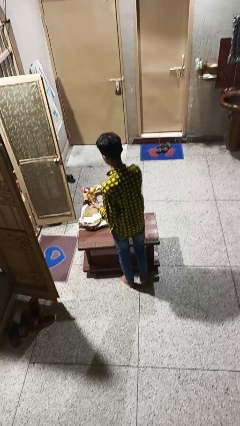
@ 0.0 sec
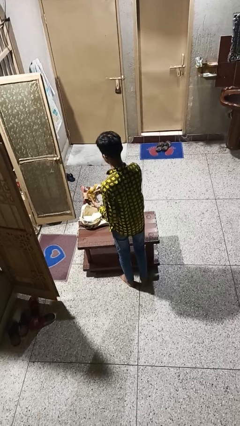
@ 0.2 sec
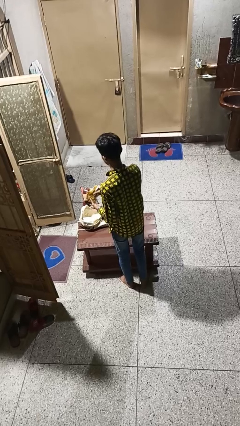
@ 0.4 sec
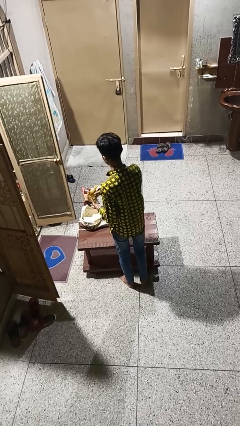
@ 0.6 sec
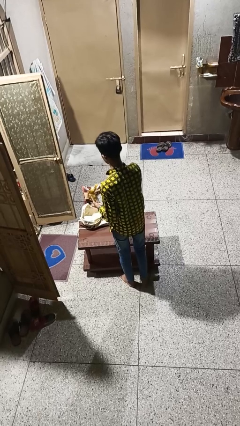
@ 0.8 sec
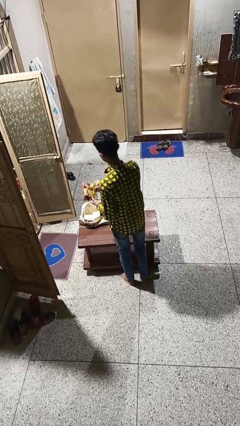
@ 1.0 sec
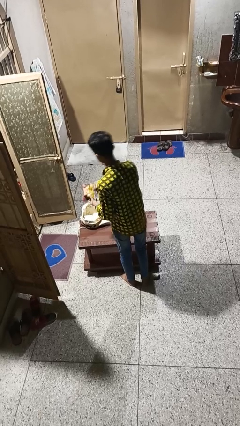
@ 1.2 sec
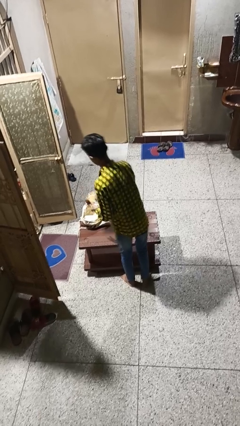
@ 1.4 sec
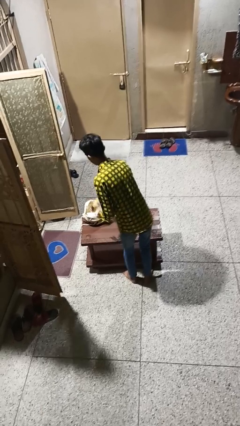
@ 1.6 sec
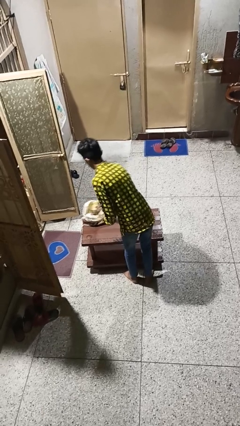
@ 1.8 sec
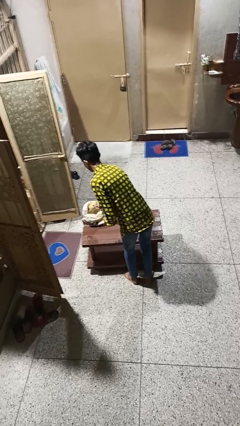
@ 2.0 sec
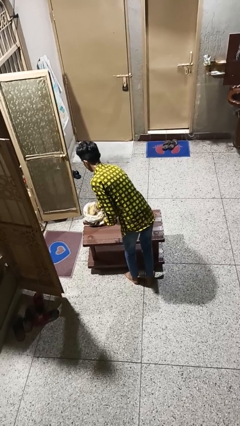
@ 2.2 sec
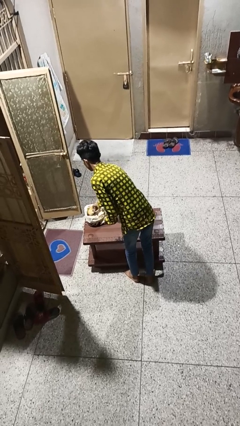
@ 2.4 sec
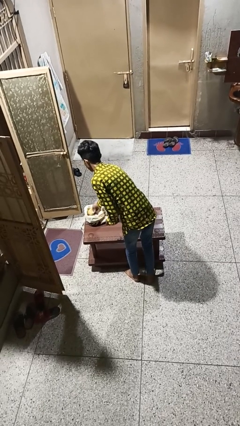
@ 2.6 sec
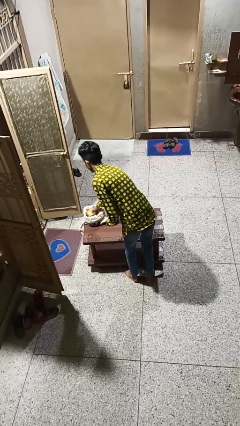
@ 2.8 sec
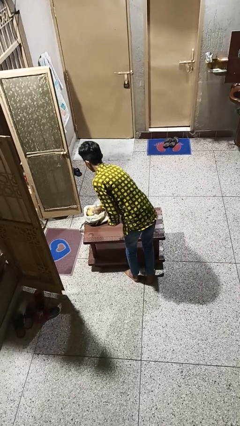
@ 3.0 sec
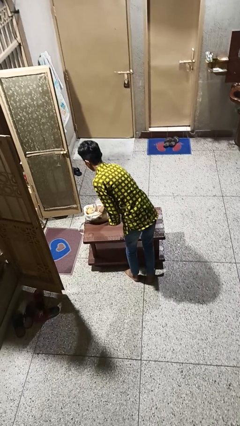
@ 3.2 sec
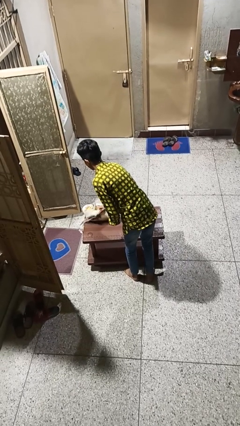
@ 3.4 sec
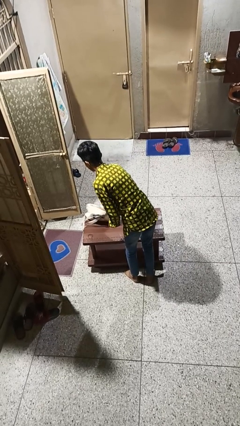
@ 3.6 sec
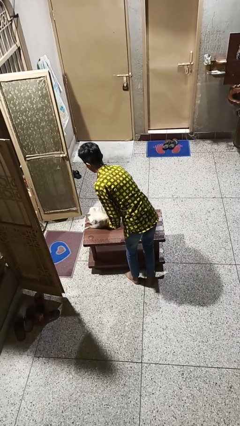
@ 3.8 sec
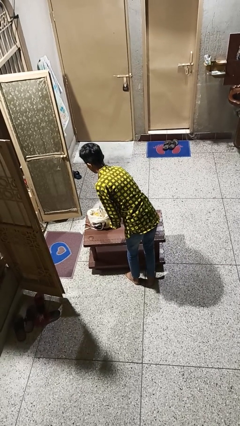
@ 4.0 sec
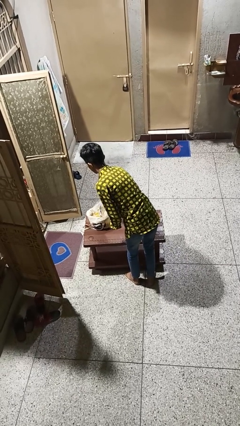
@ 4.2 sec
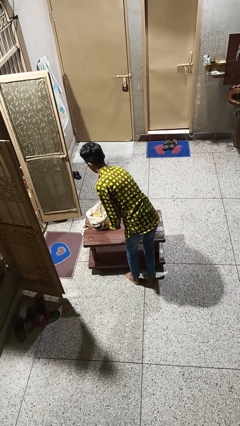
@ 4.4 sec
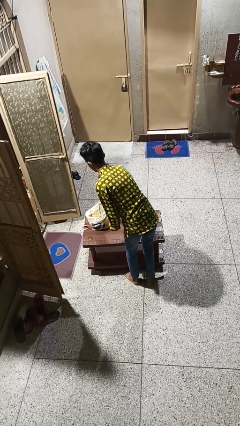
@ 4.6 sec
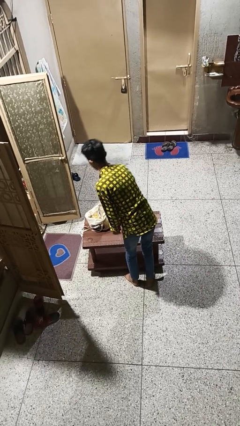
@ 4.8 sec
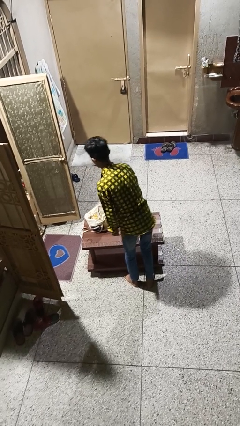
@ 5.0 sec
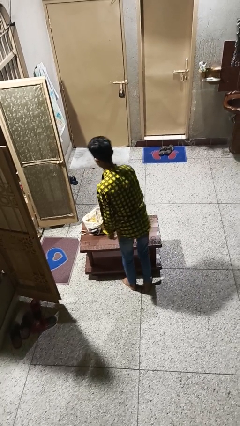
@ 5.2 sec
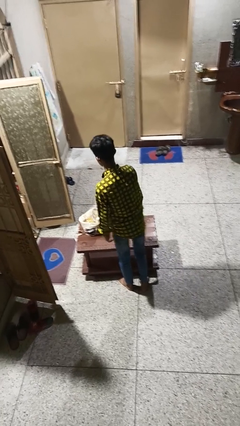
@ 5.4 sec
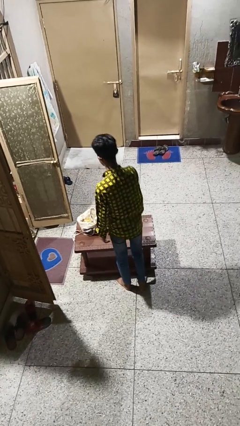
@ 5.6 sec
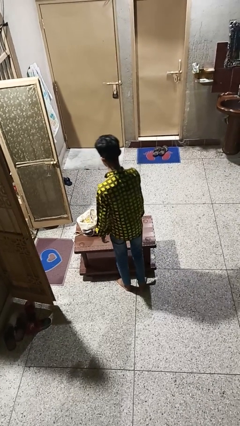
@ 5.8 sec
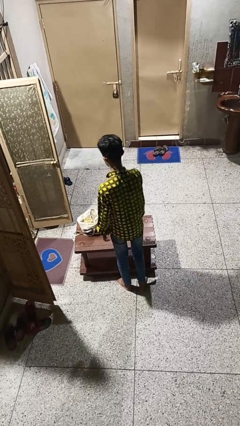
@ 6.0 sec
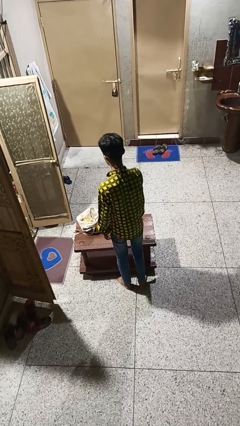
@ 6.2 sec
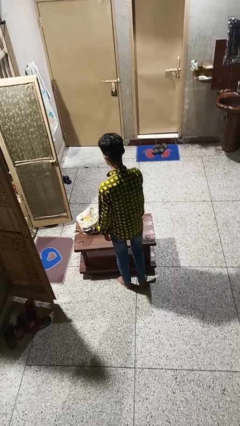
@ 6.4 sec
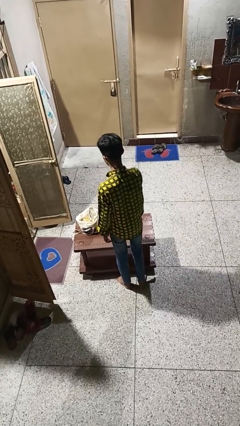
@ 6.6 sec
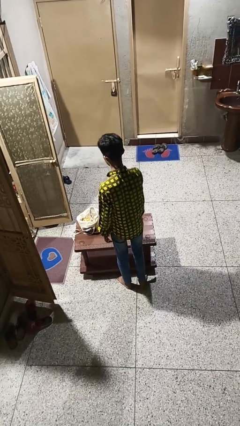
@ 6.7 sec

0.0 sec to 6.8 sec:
person puts object into bag

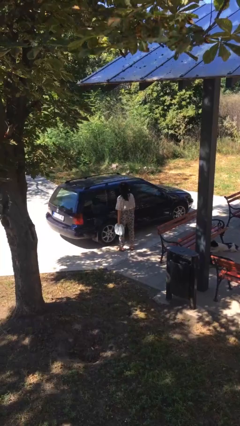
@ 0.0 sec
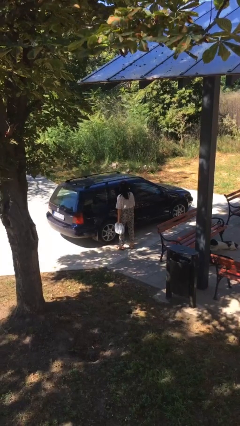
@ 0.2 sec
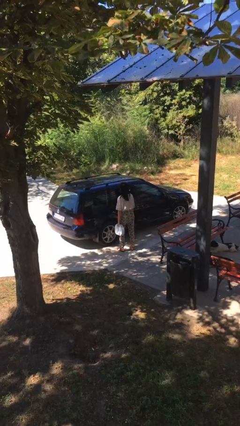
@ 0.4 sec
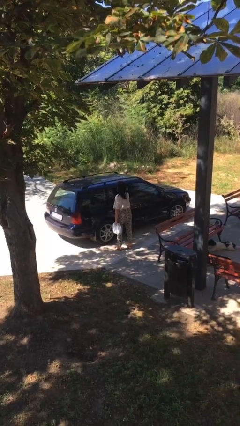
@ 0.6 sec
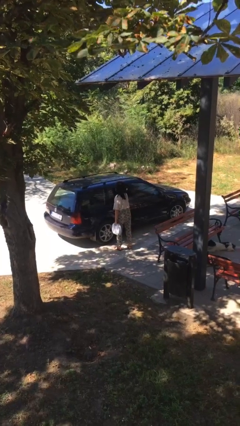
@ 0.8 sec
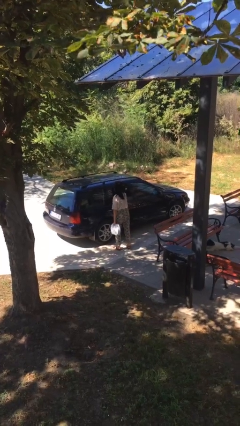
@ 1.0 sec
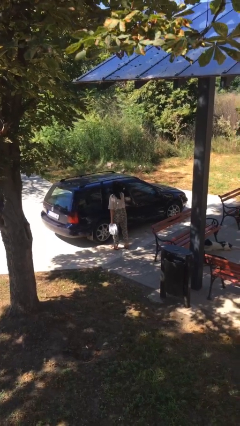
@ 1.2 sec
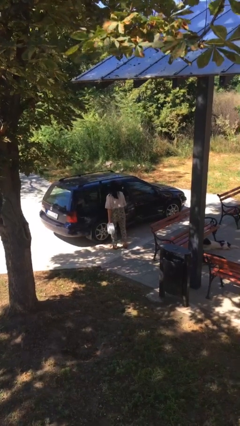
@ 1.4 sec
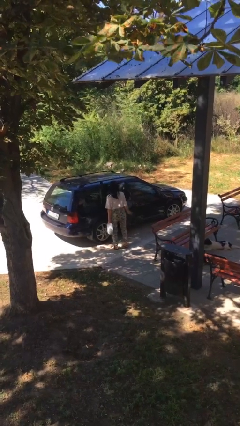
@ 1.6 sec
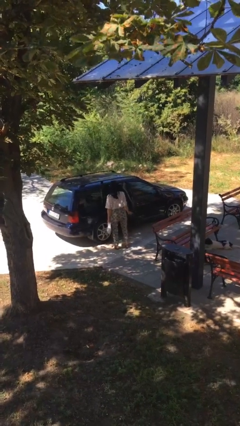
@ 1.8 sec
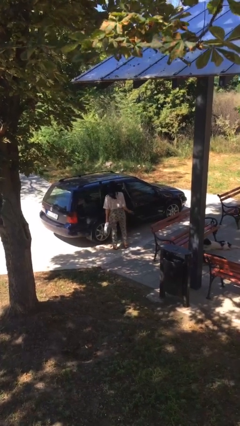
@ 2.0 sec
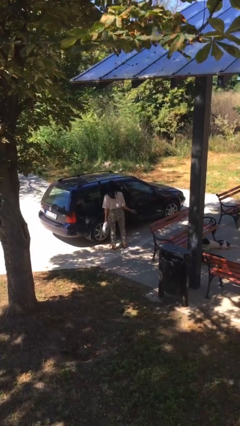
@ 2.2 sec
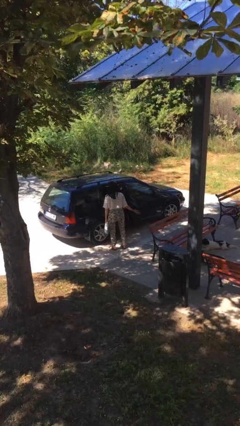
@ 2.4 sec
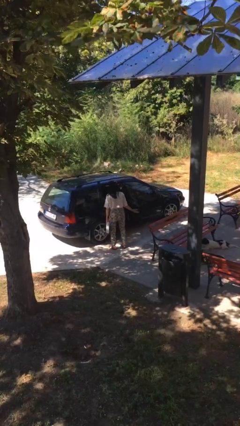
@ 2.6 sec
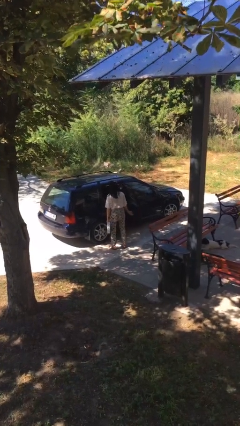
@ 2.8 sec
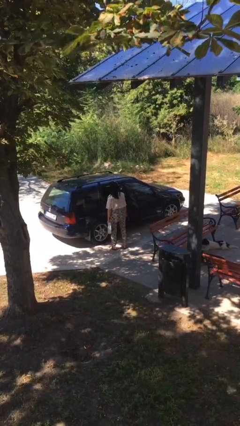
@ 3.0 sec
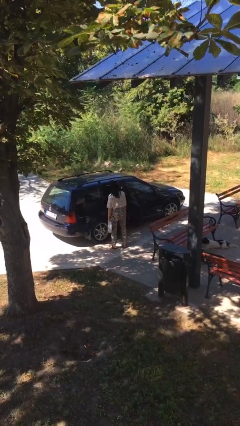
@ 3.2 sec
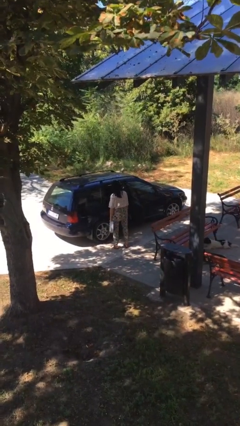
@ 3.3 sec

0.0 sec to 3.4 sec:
person opens car door

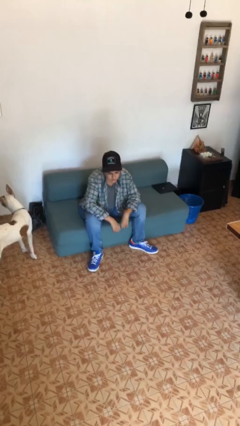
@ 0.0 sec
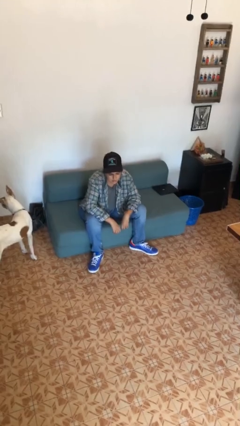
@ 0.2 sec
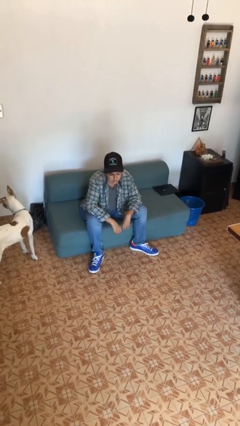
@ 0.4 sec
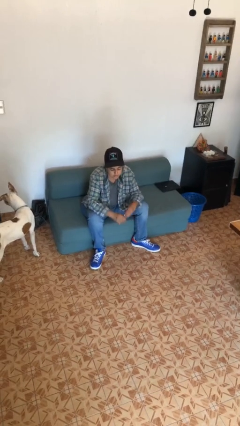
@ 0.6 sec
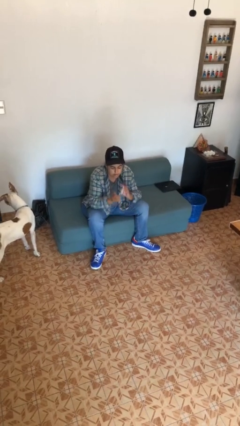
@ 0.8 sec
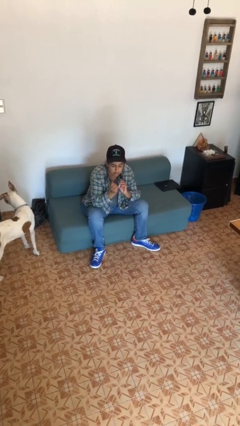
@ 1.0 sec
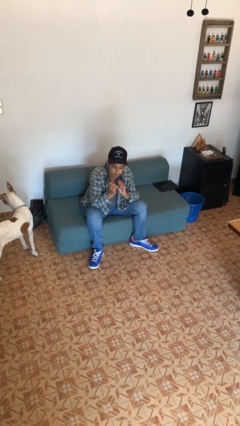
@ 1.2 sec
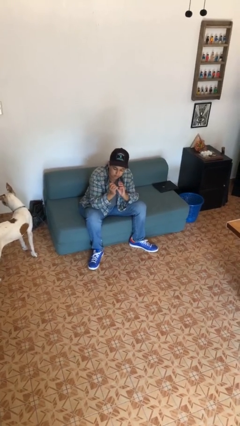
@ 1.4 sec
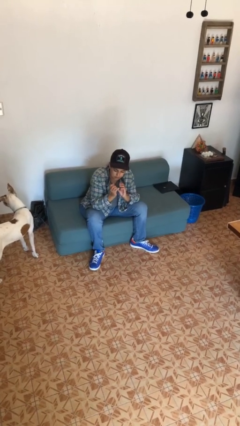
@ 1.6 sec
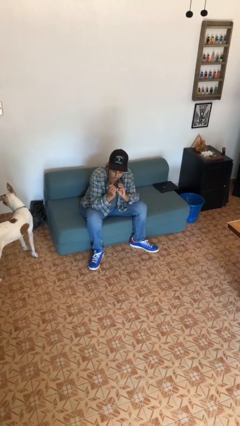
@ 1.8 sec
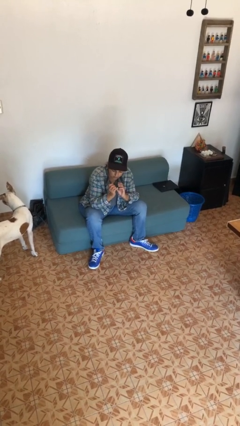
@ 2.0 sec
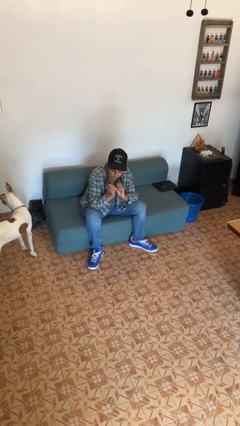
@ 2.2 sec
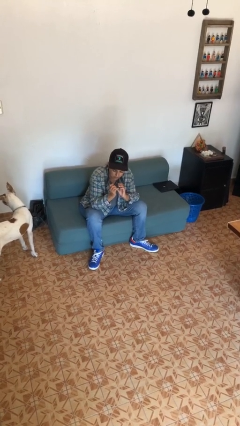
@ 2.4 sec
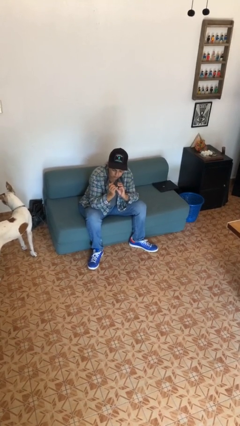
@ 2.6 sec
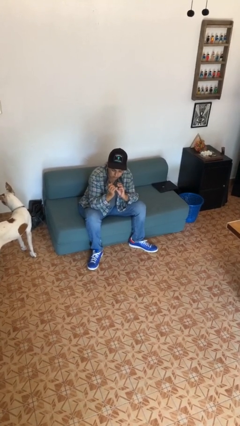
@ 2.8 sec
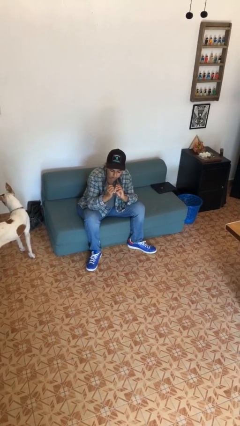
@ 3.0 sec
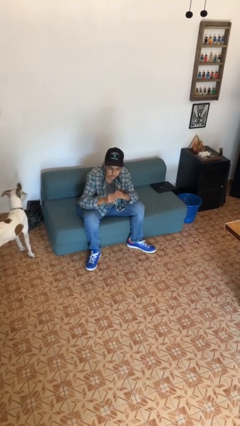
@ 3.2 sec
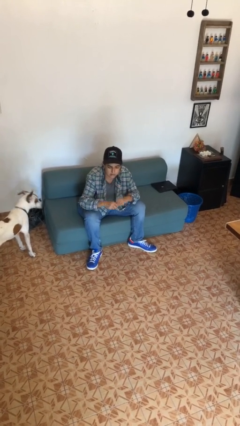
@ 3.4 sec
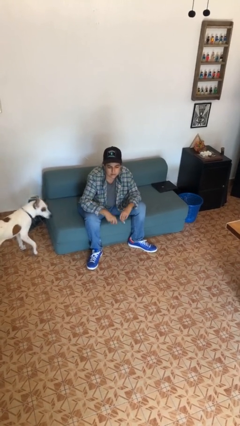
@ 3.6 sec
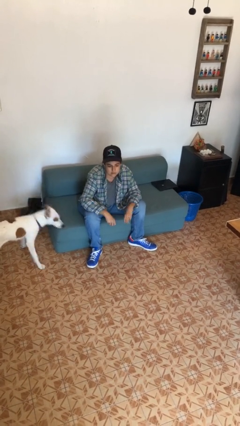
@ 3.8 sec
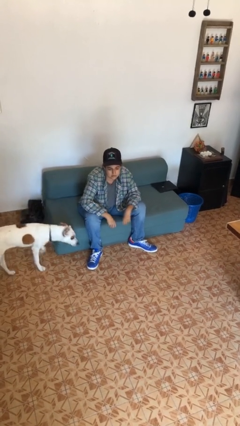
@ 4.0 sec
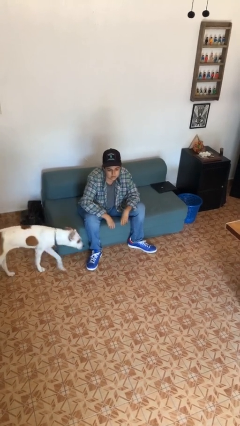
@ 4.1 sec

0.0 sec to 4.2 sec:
person clips fingernails

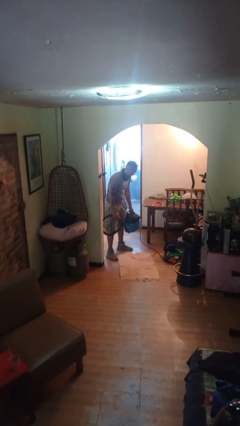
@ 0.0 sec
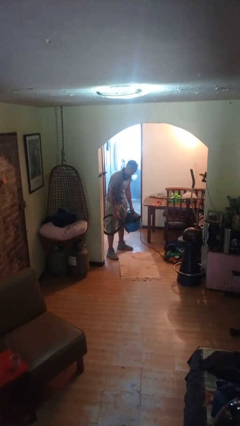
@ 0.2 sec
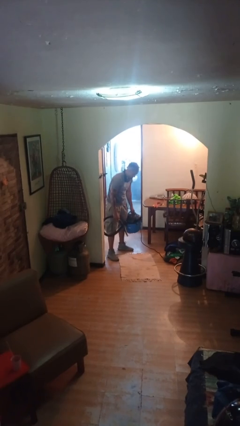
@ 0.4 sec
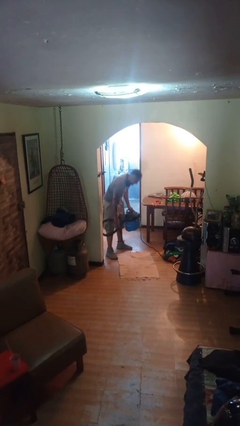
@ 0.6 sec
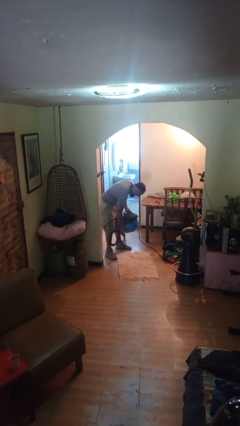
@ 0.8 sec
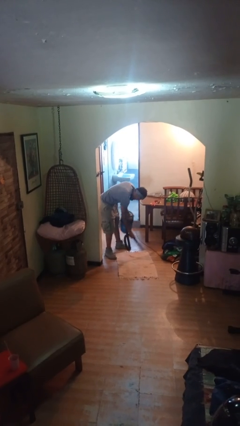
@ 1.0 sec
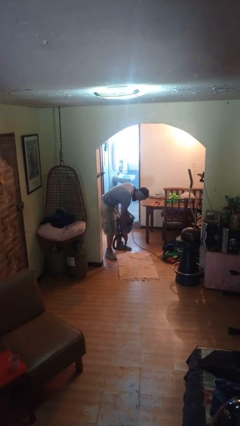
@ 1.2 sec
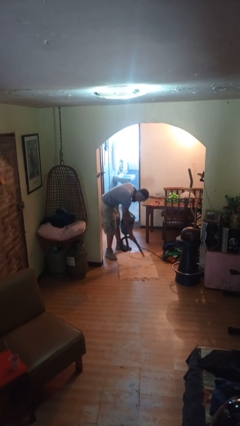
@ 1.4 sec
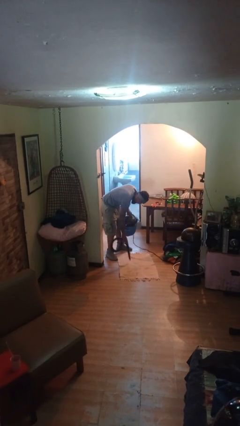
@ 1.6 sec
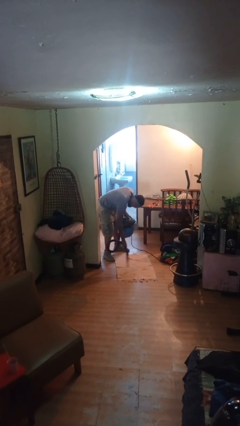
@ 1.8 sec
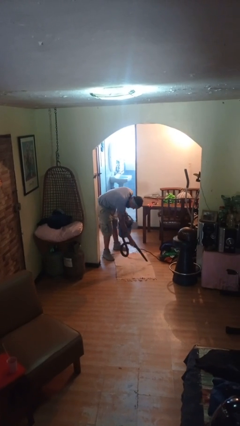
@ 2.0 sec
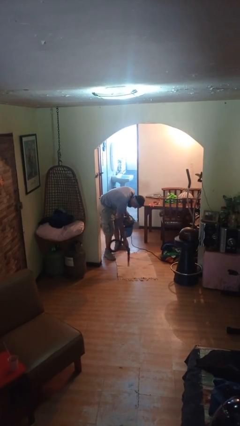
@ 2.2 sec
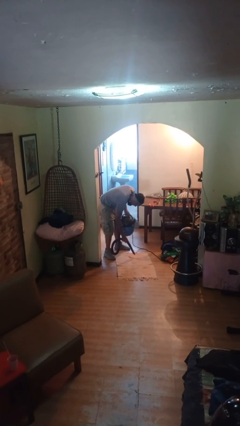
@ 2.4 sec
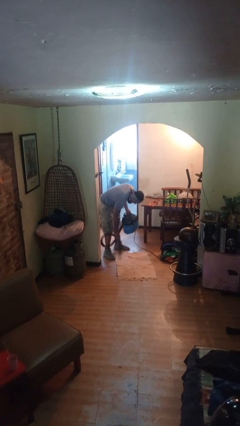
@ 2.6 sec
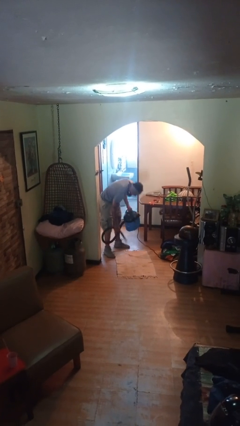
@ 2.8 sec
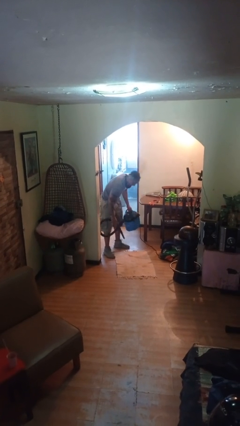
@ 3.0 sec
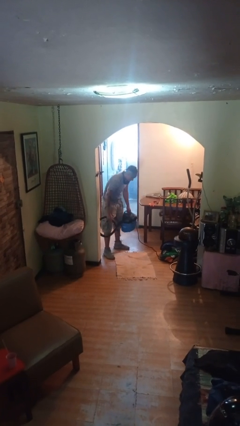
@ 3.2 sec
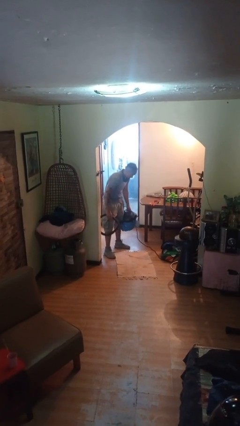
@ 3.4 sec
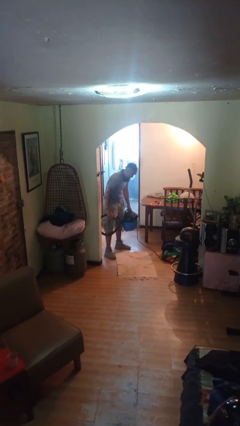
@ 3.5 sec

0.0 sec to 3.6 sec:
person vacuums carpet
